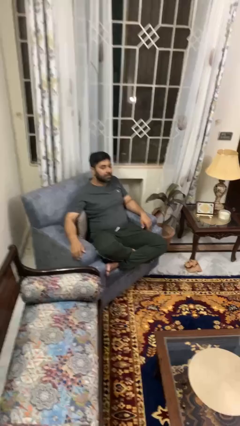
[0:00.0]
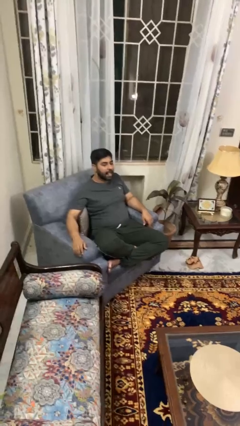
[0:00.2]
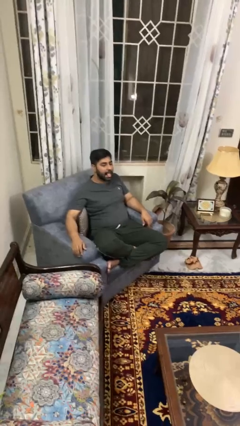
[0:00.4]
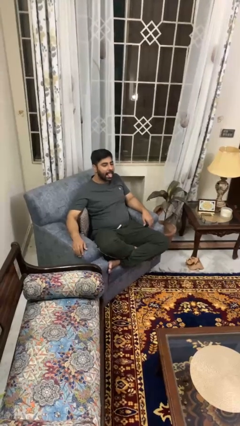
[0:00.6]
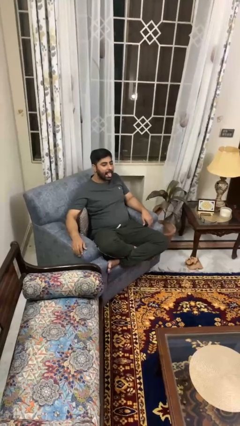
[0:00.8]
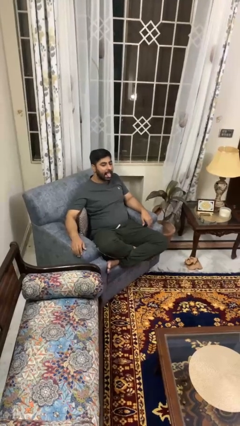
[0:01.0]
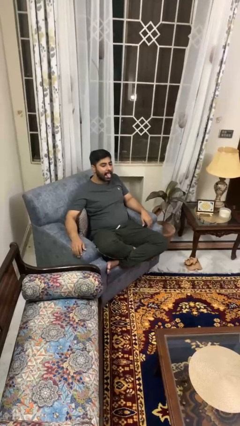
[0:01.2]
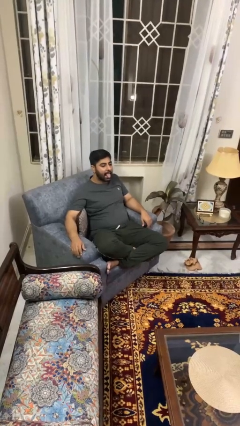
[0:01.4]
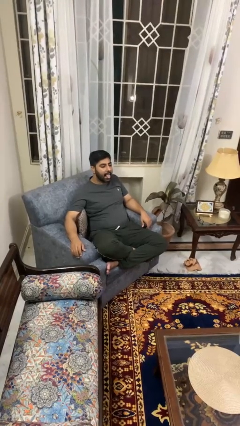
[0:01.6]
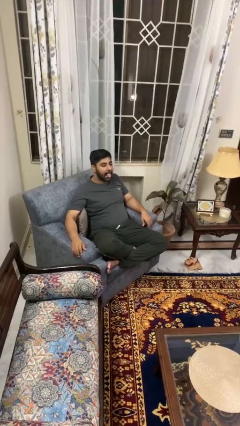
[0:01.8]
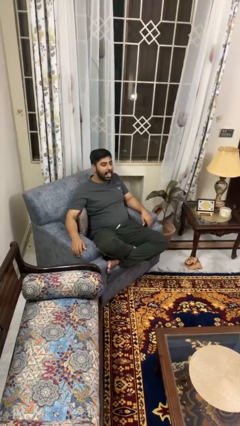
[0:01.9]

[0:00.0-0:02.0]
person sticks out tongue

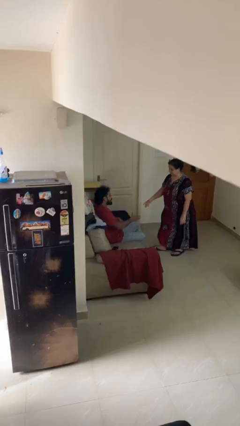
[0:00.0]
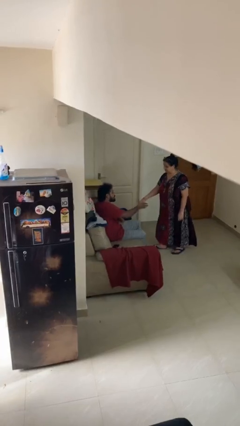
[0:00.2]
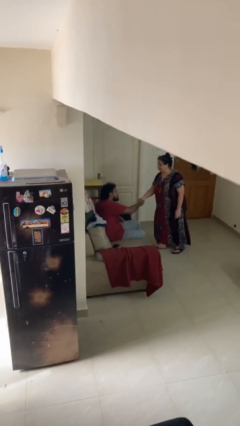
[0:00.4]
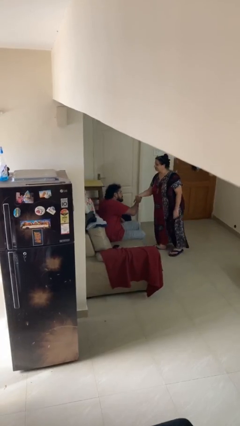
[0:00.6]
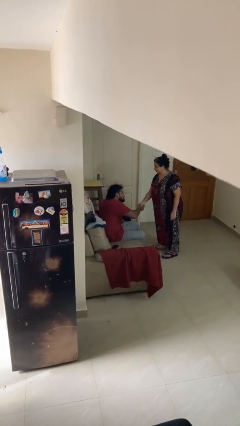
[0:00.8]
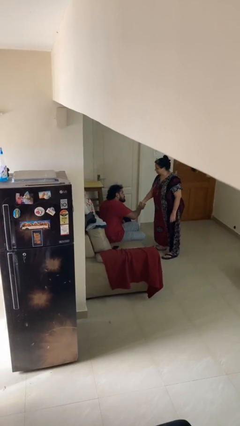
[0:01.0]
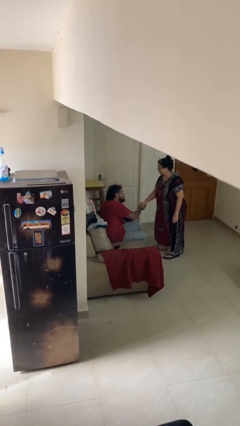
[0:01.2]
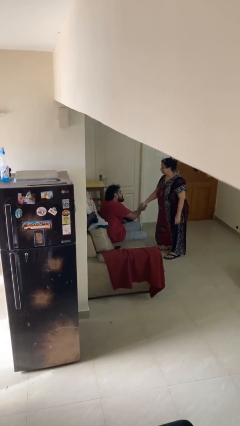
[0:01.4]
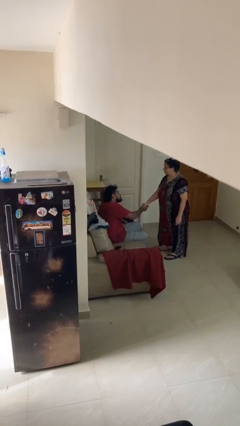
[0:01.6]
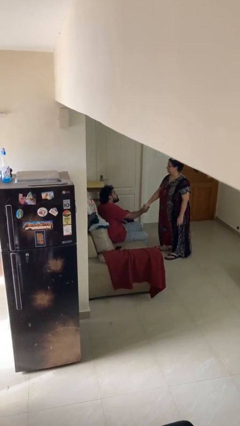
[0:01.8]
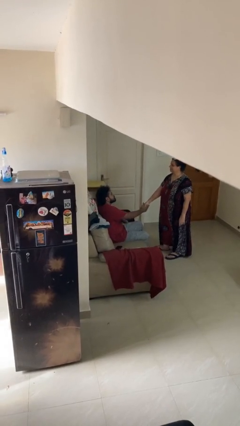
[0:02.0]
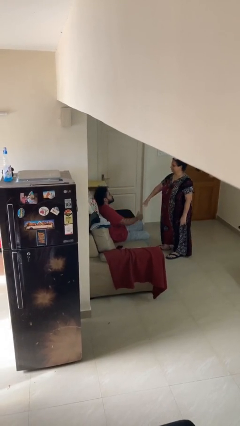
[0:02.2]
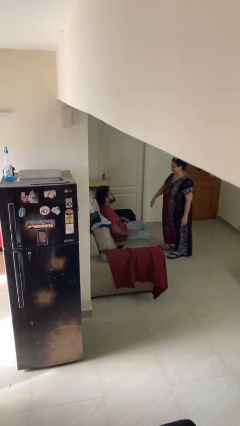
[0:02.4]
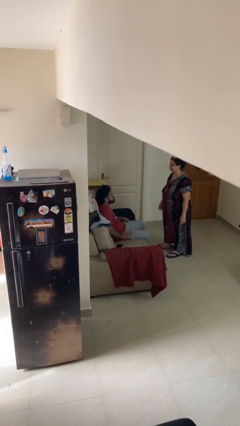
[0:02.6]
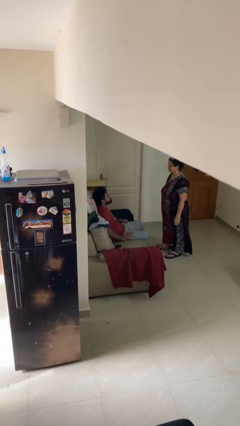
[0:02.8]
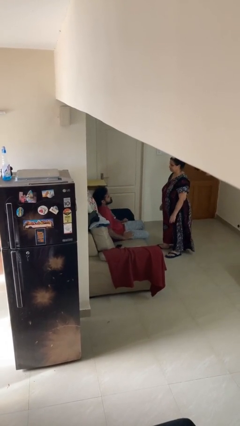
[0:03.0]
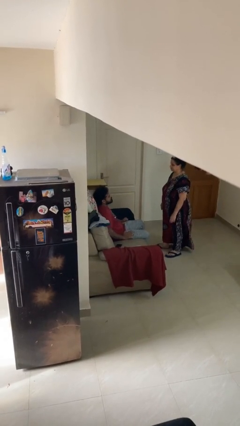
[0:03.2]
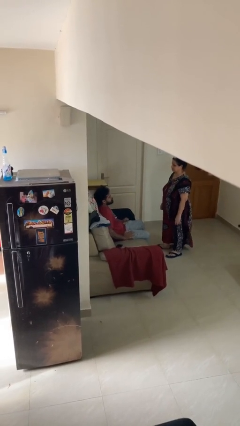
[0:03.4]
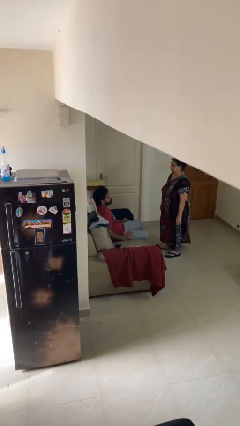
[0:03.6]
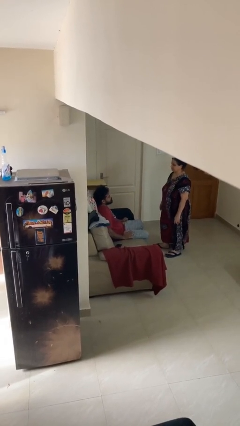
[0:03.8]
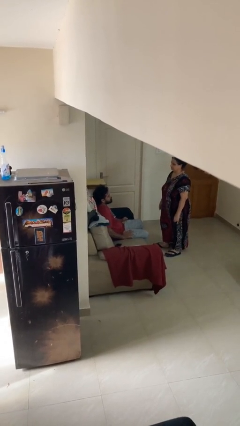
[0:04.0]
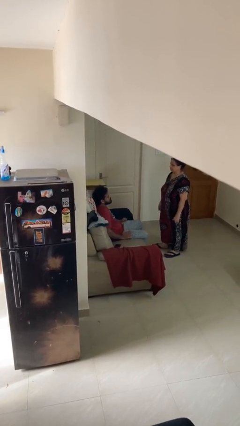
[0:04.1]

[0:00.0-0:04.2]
person shakes hand

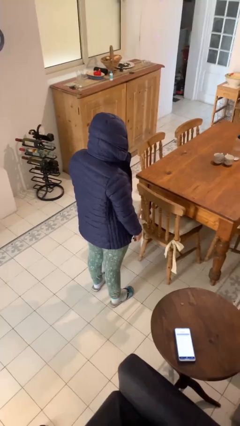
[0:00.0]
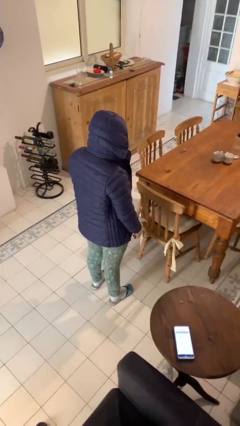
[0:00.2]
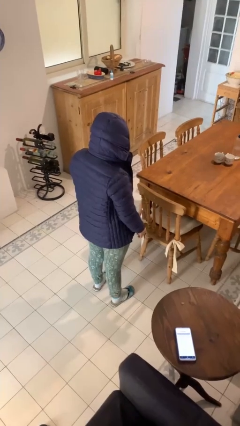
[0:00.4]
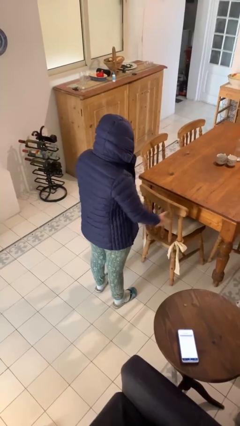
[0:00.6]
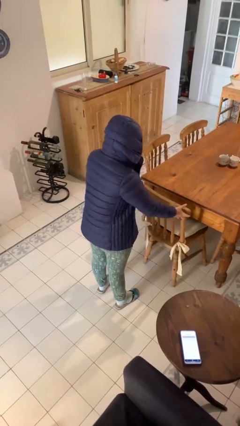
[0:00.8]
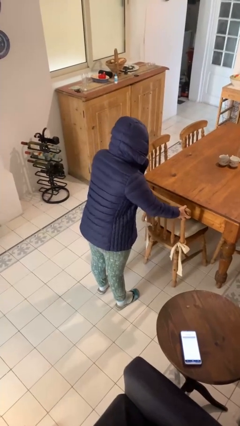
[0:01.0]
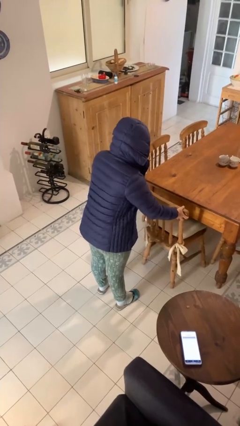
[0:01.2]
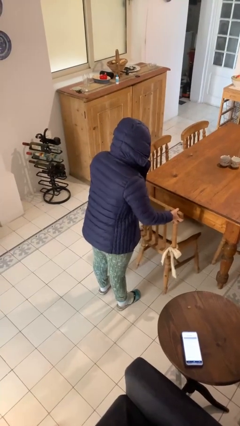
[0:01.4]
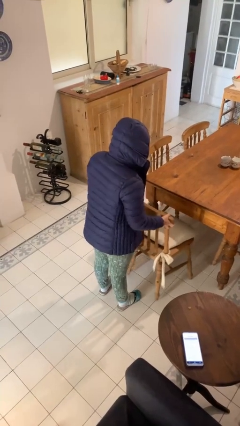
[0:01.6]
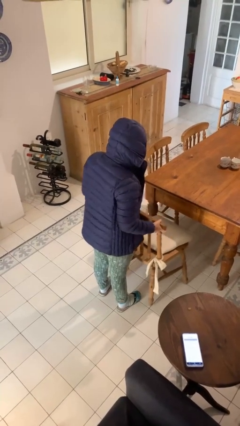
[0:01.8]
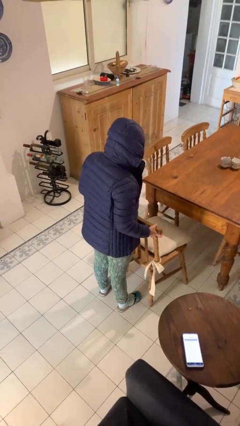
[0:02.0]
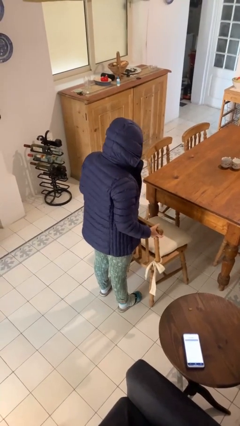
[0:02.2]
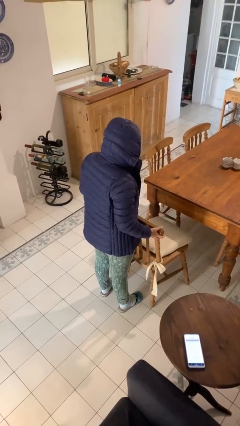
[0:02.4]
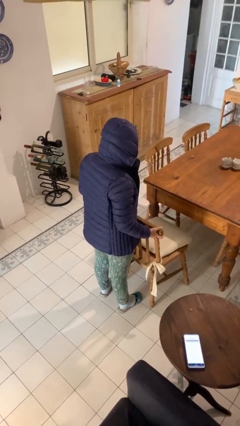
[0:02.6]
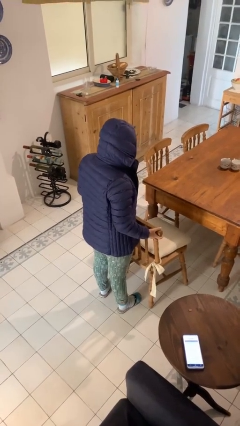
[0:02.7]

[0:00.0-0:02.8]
person pulls out chair

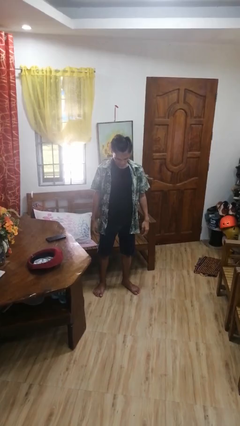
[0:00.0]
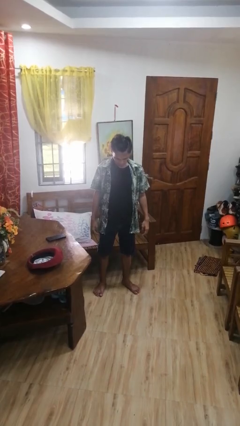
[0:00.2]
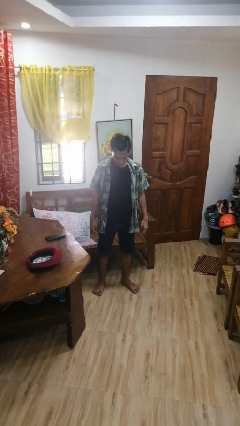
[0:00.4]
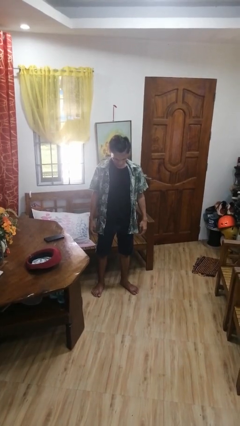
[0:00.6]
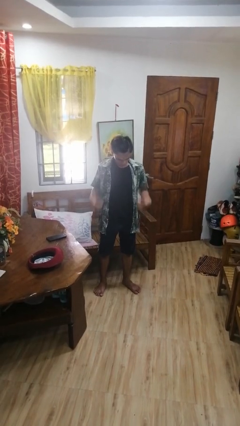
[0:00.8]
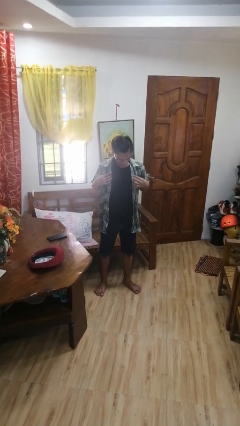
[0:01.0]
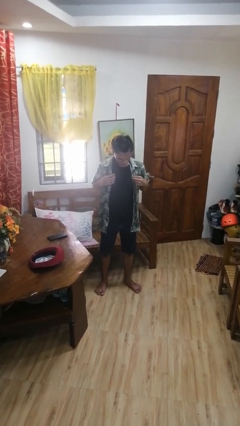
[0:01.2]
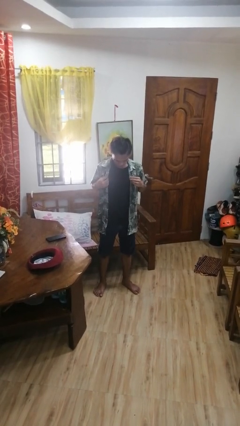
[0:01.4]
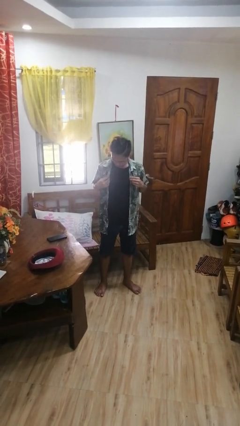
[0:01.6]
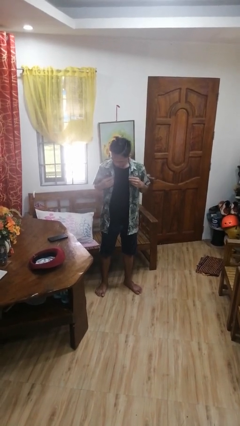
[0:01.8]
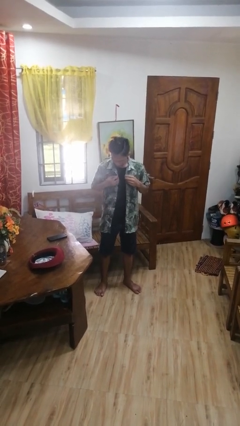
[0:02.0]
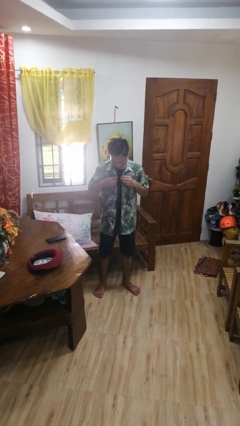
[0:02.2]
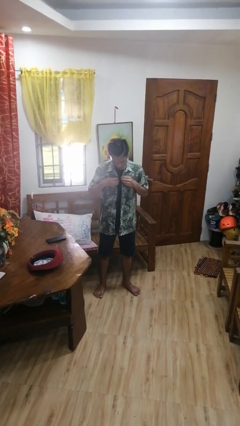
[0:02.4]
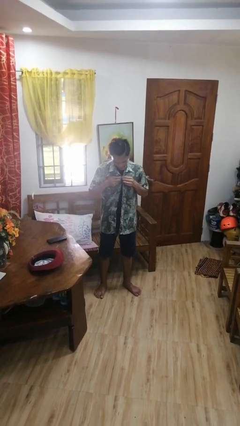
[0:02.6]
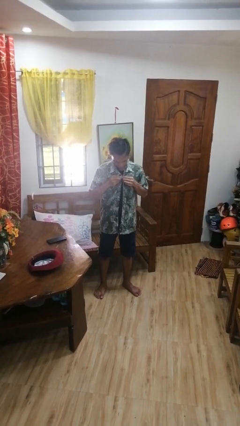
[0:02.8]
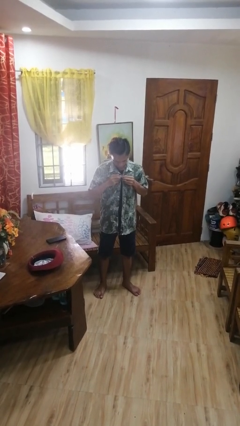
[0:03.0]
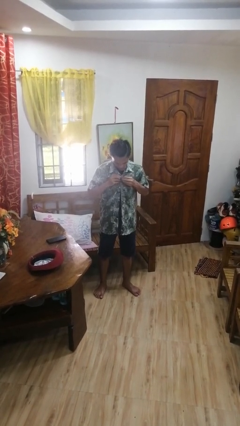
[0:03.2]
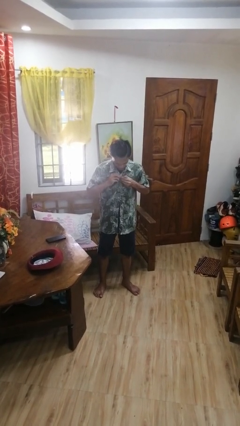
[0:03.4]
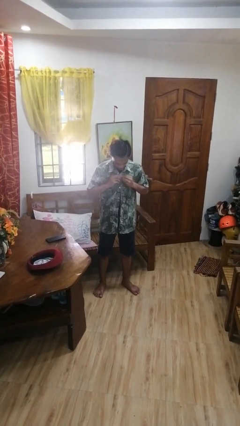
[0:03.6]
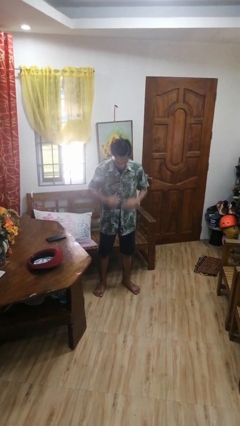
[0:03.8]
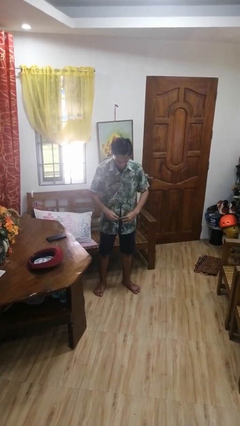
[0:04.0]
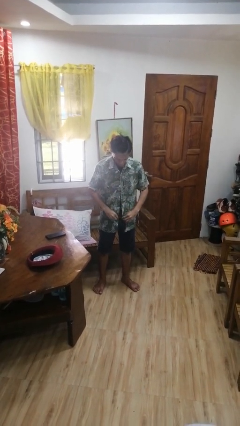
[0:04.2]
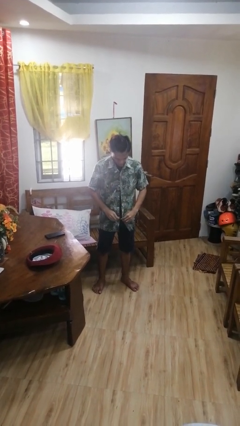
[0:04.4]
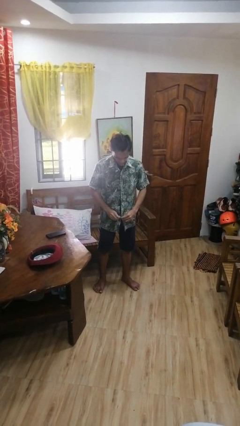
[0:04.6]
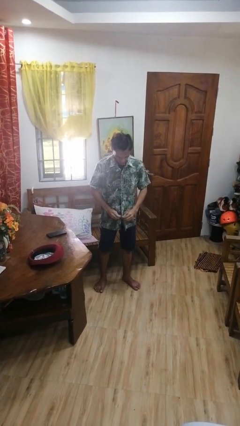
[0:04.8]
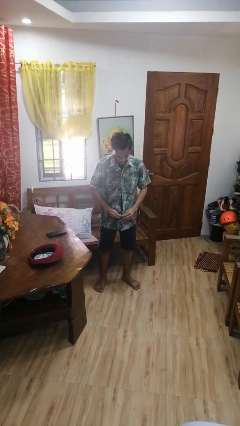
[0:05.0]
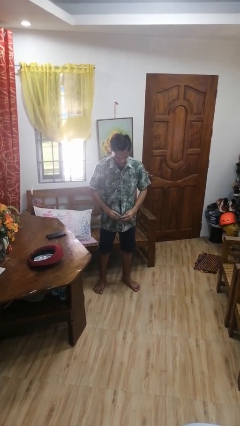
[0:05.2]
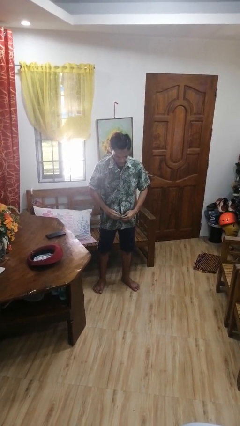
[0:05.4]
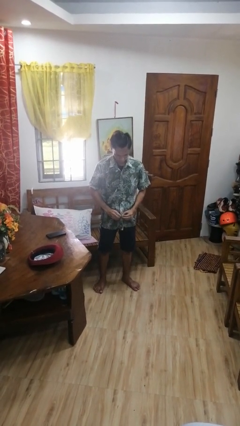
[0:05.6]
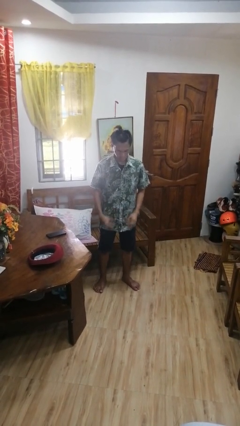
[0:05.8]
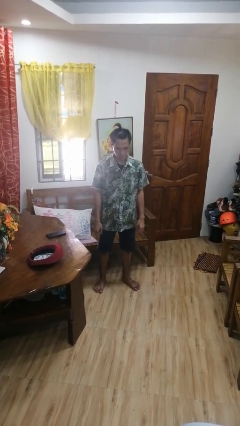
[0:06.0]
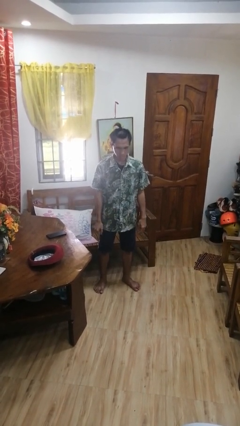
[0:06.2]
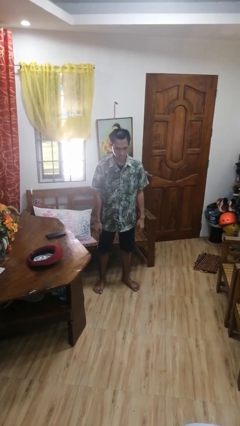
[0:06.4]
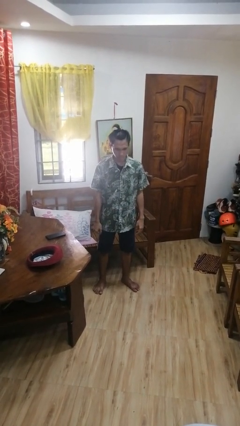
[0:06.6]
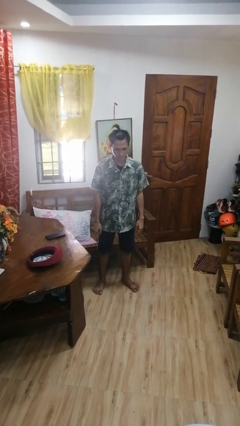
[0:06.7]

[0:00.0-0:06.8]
person buttons shirt

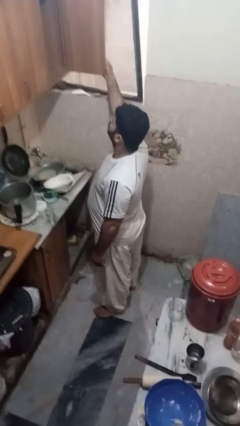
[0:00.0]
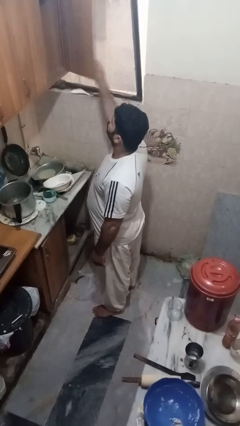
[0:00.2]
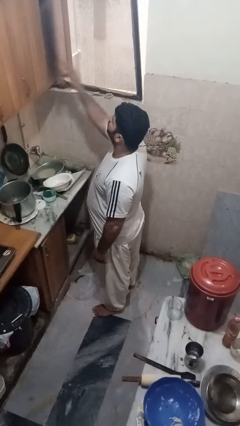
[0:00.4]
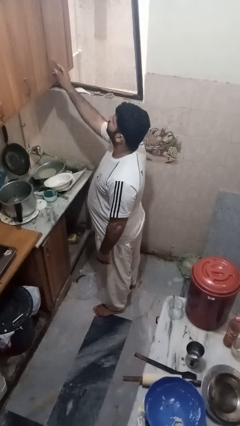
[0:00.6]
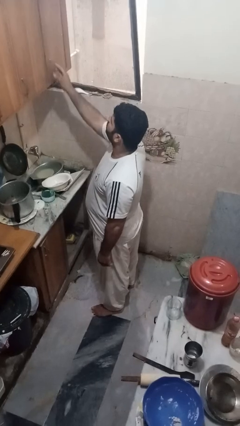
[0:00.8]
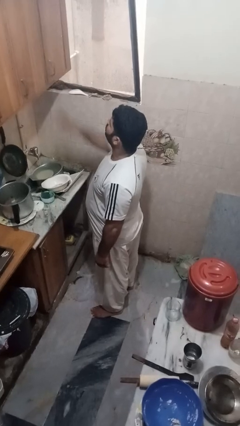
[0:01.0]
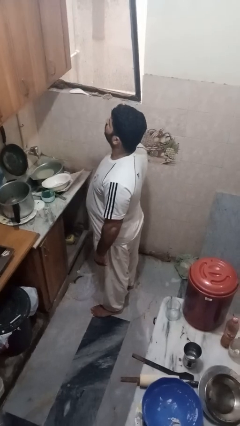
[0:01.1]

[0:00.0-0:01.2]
person closes cabinet

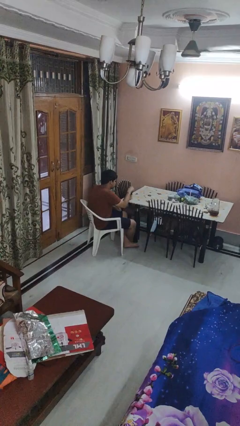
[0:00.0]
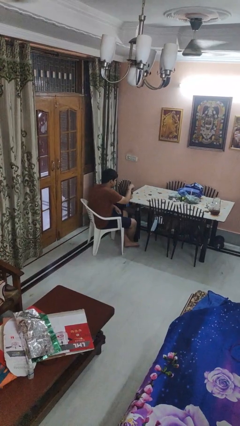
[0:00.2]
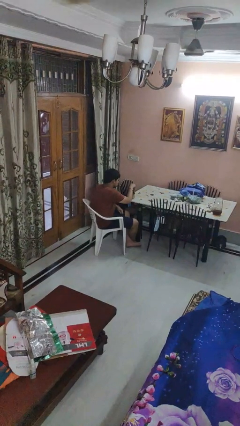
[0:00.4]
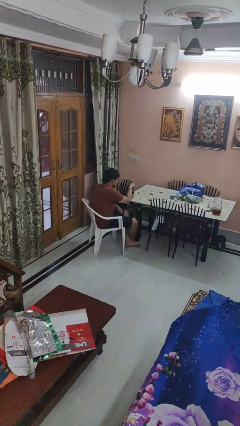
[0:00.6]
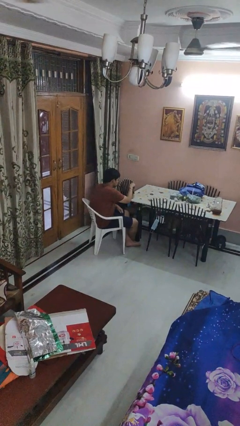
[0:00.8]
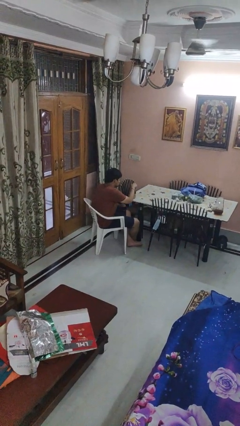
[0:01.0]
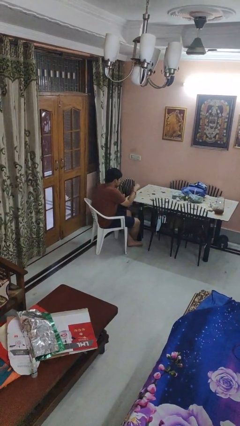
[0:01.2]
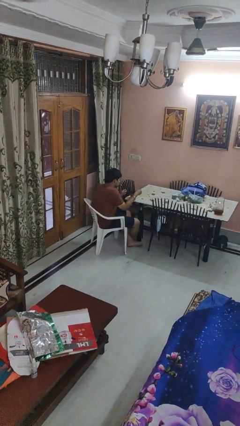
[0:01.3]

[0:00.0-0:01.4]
person stirs mug
